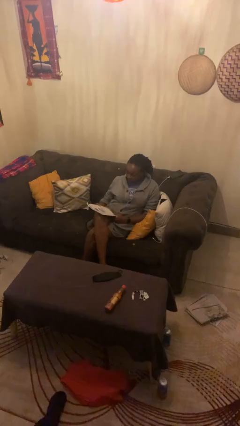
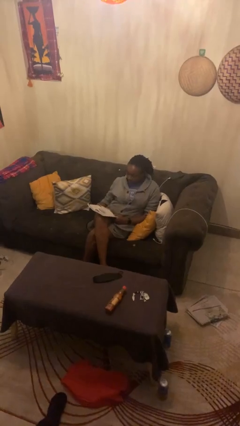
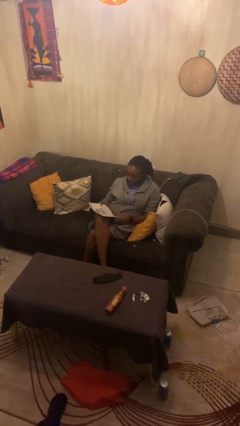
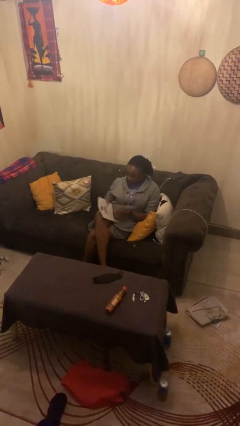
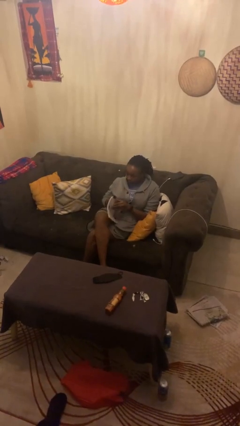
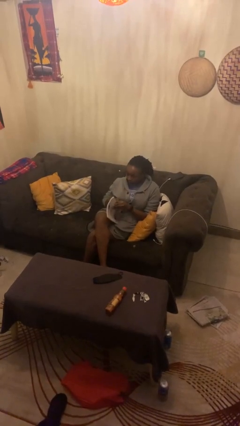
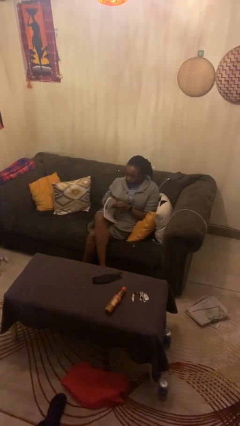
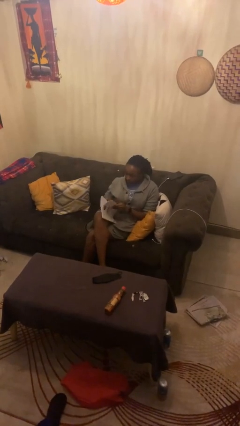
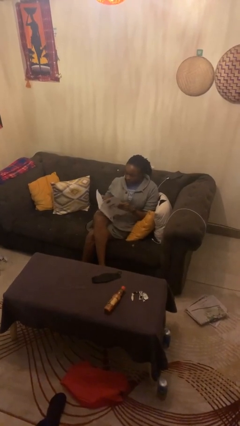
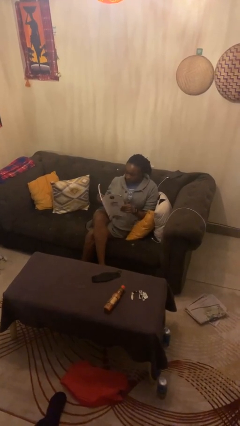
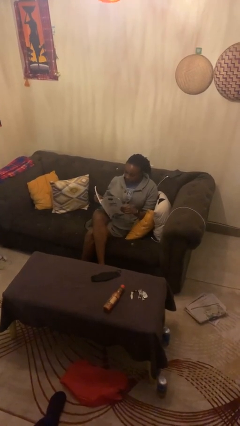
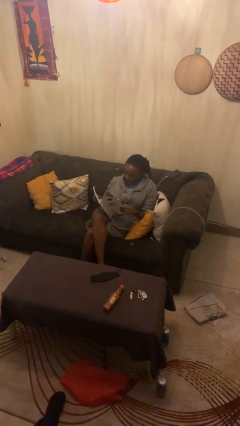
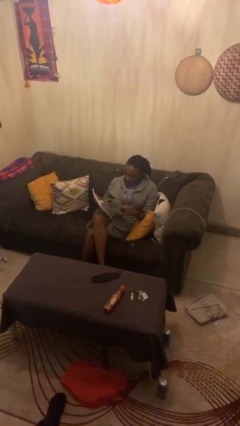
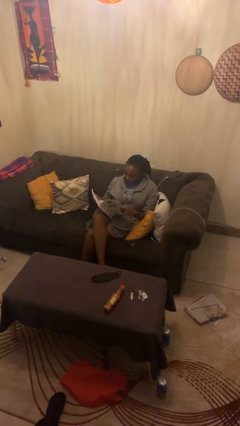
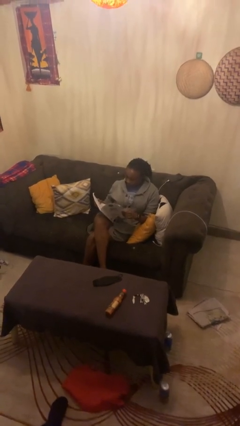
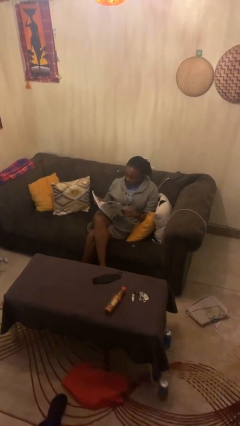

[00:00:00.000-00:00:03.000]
person reads magazine

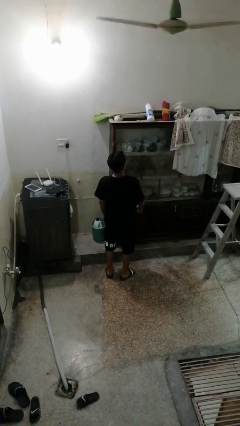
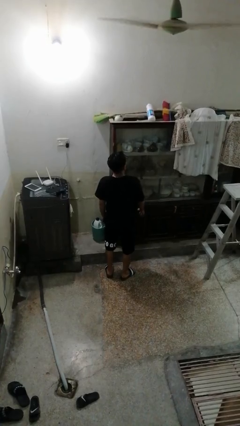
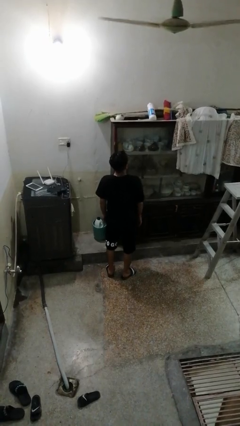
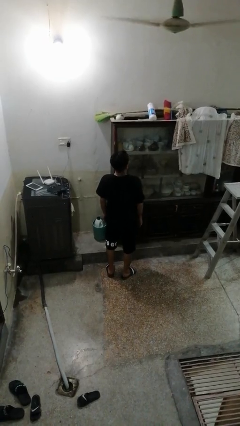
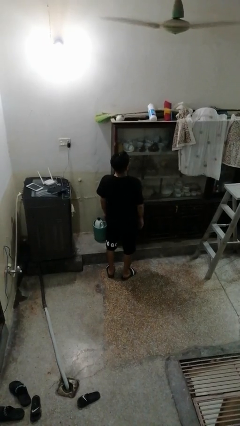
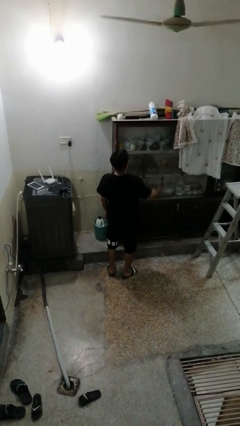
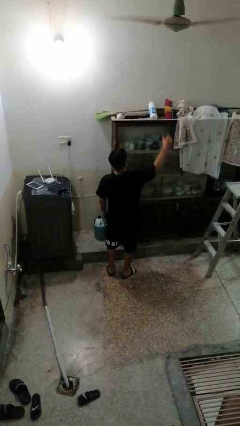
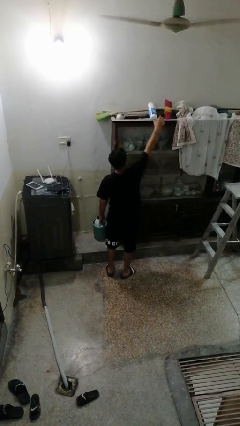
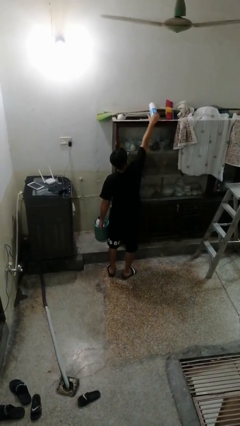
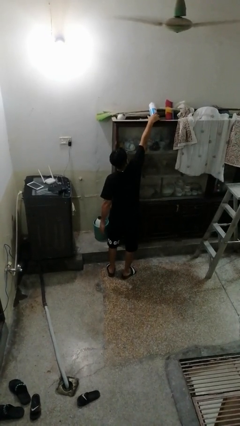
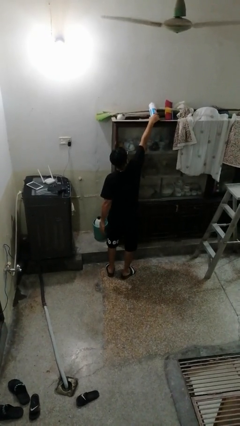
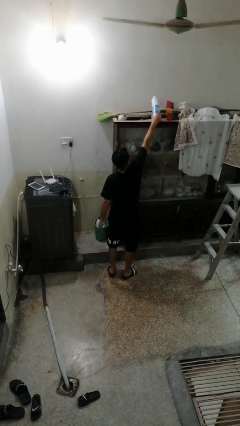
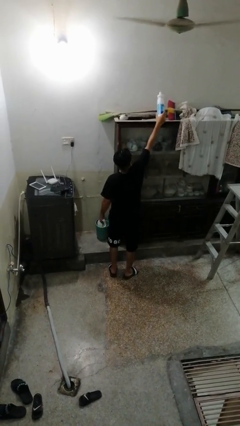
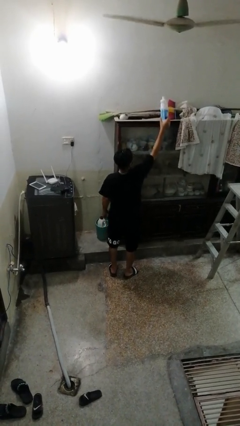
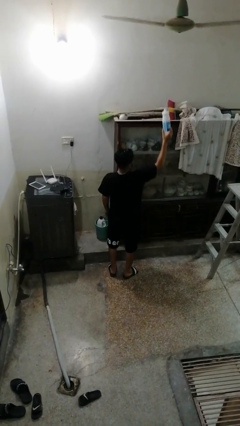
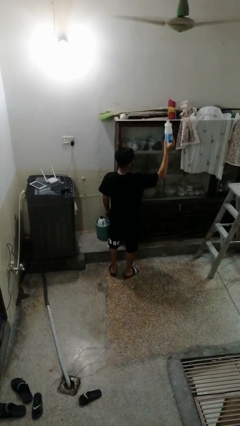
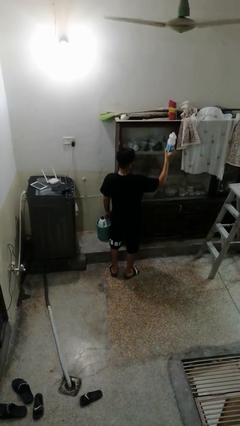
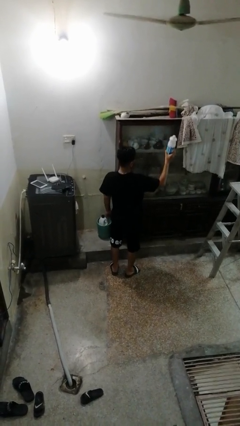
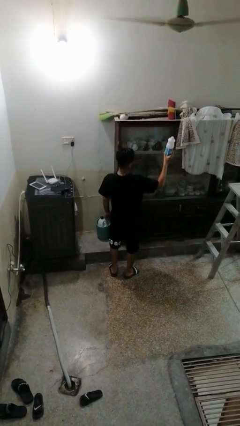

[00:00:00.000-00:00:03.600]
person picks up object from shelf

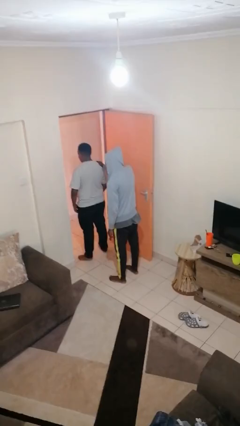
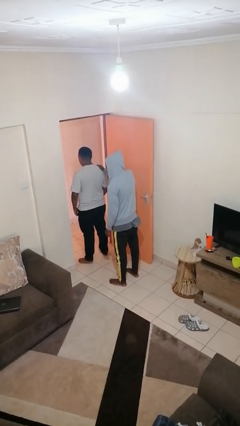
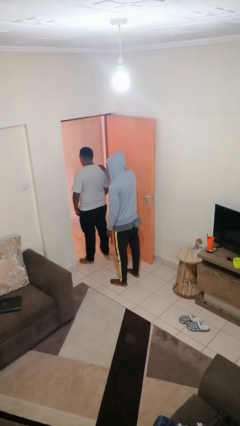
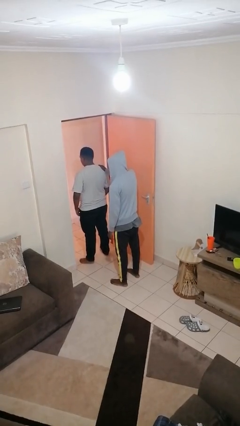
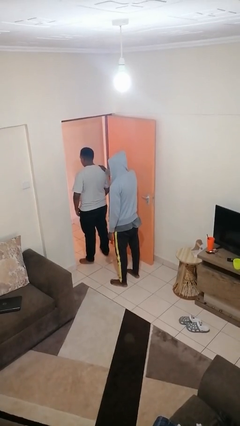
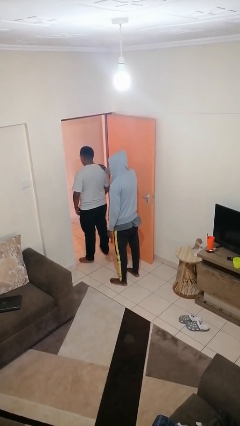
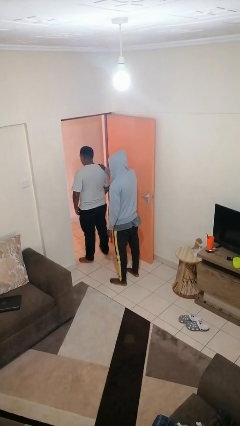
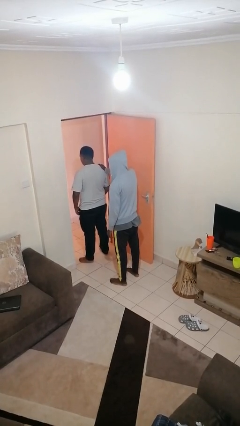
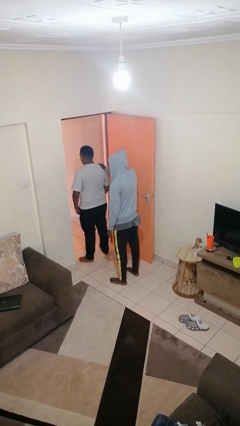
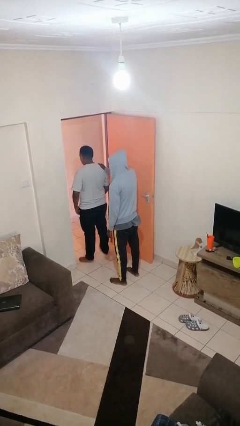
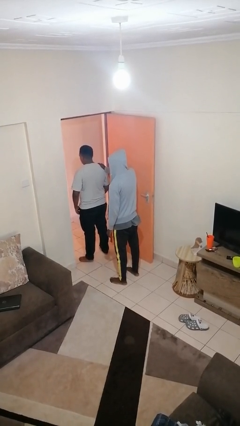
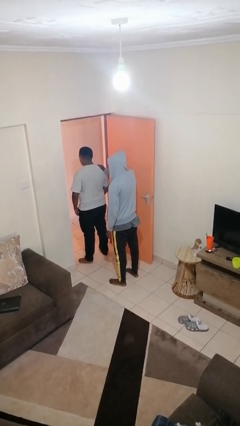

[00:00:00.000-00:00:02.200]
person grabs person by shoulder

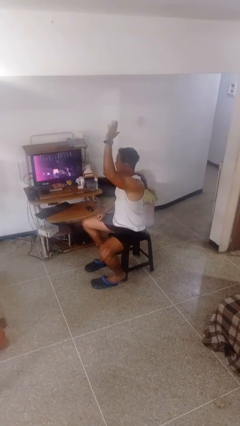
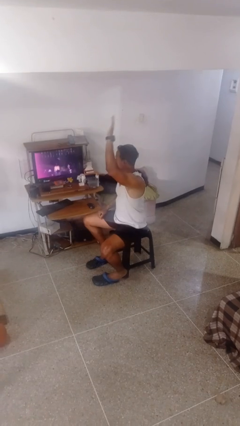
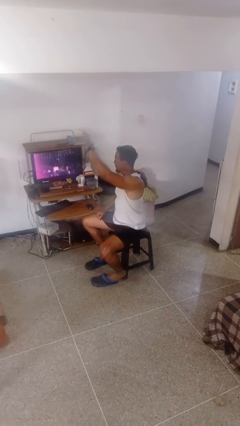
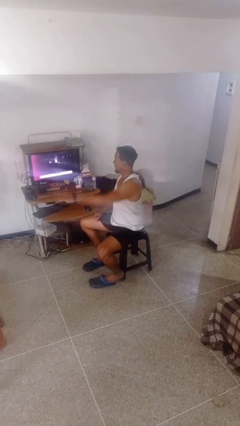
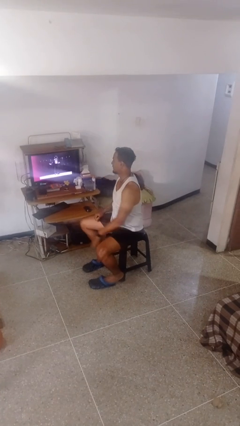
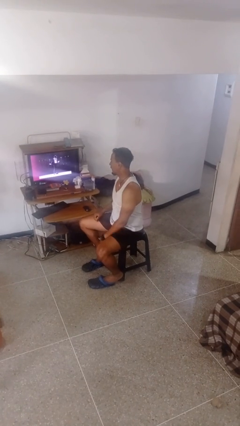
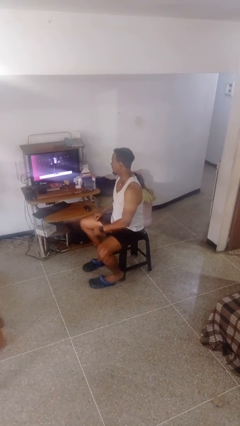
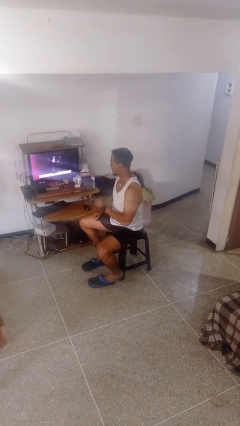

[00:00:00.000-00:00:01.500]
person gestures swipe down

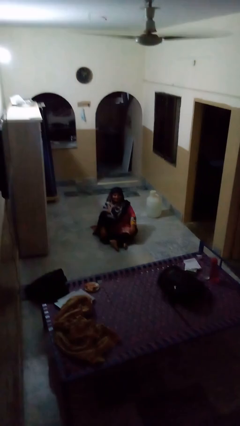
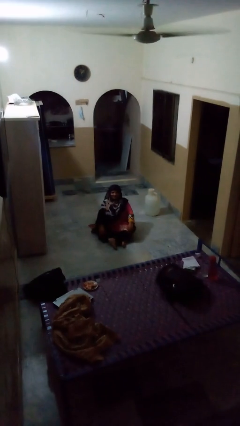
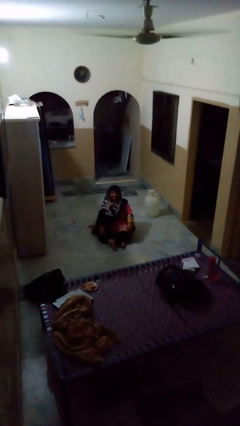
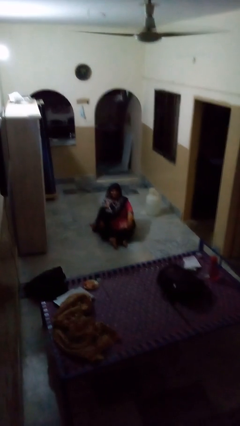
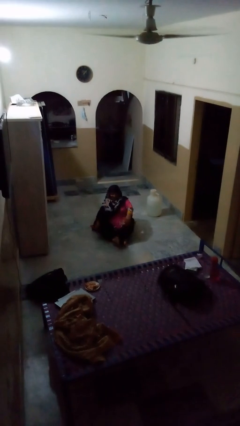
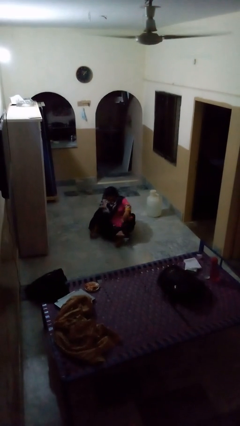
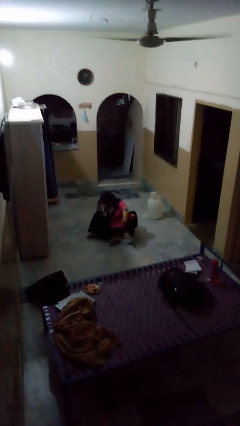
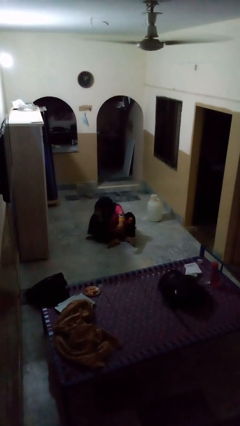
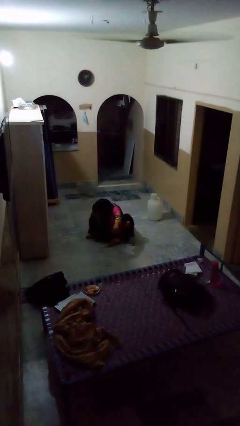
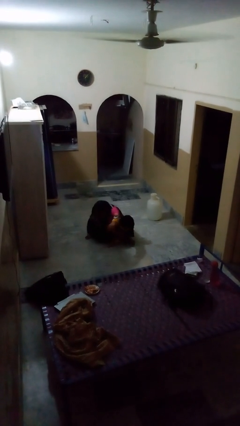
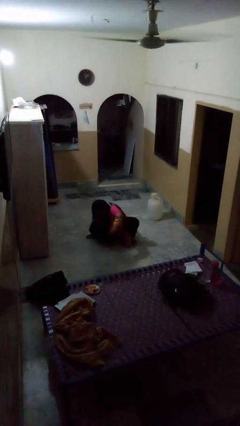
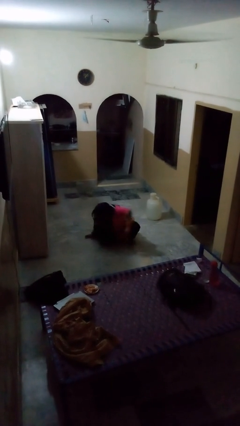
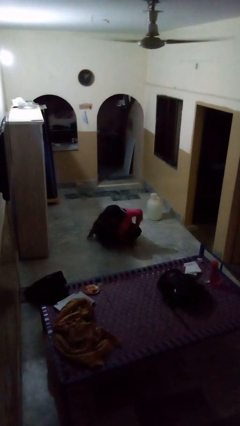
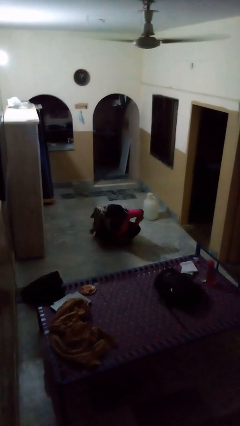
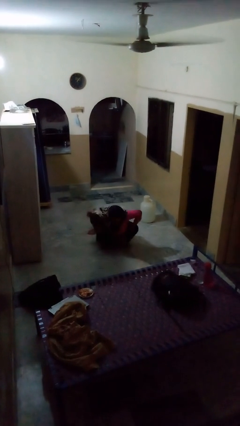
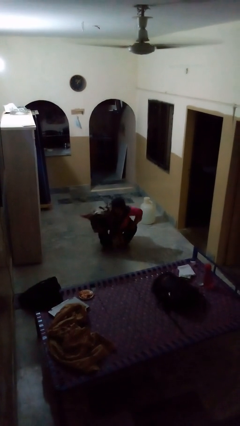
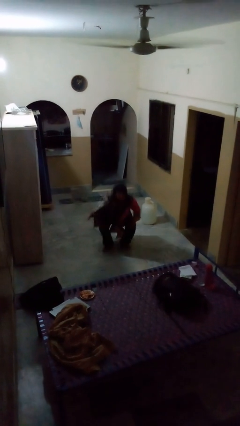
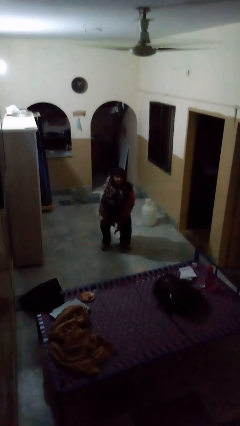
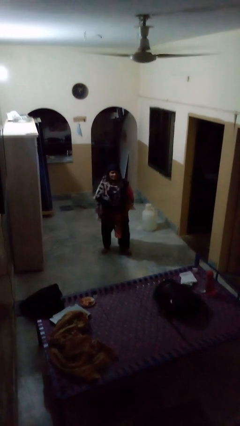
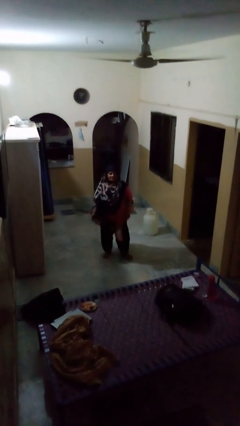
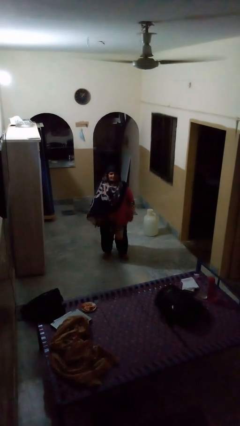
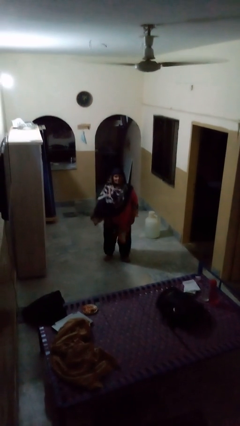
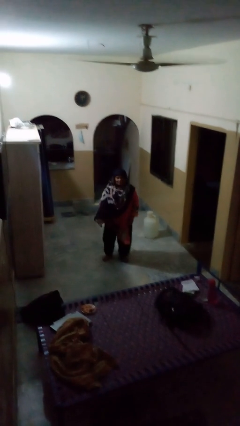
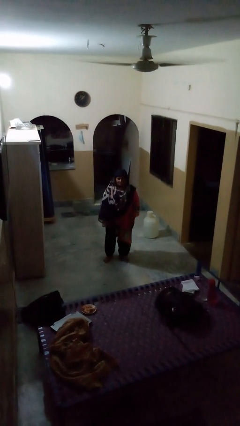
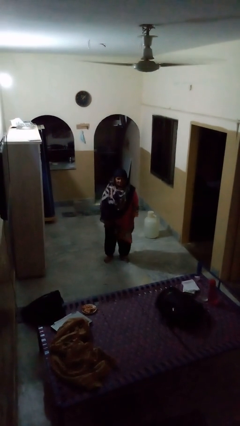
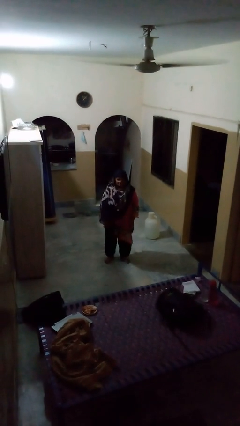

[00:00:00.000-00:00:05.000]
person stands up from floor

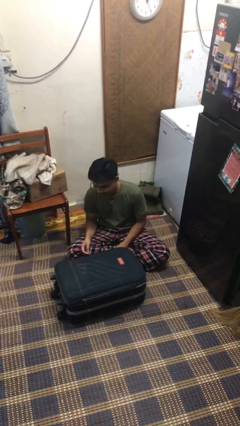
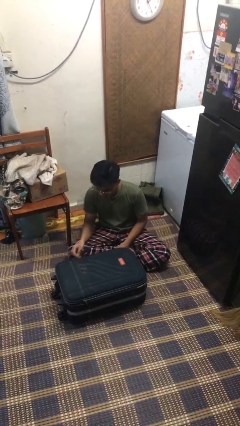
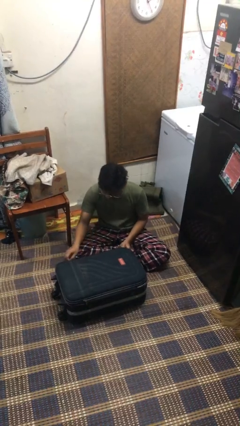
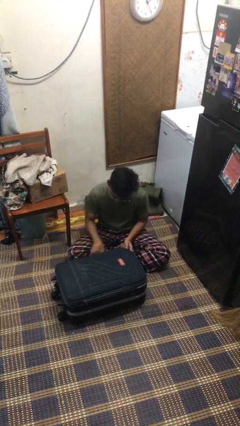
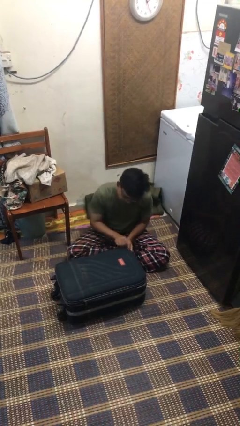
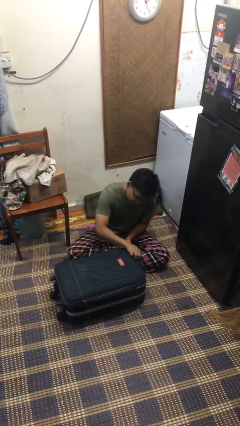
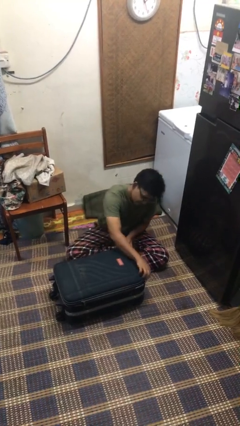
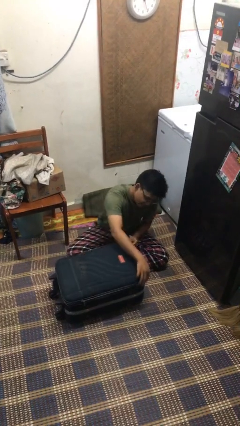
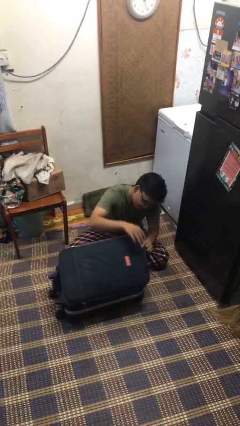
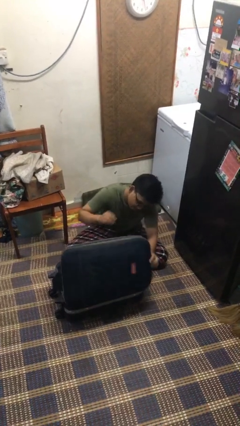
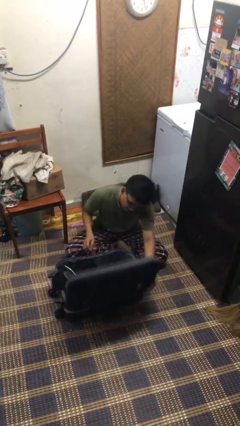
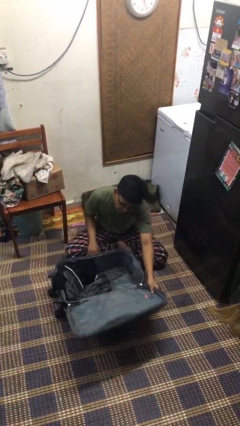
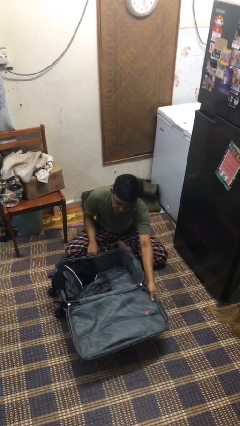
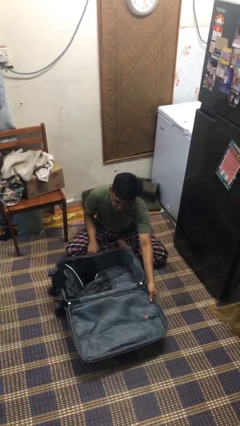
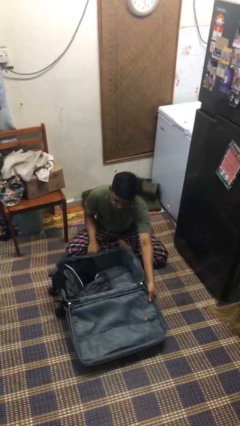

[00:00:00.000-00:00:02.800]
person opens suitcase
